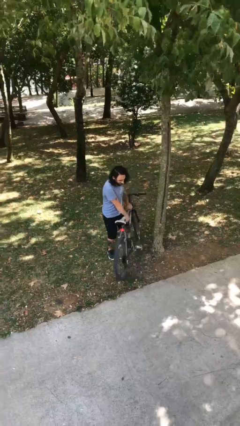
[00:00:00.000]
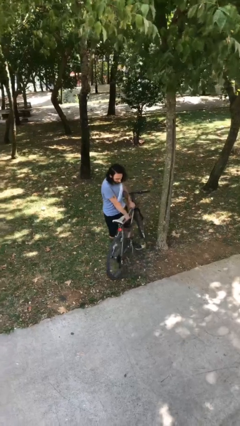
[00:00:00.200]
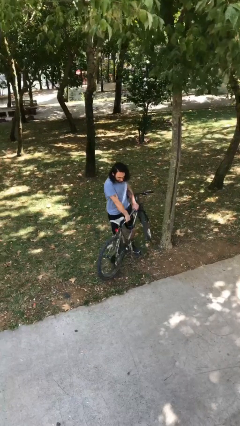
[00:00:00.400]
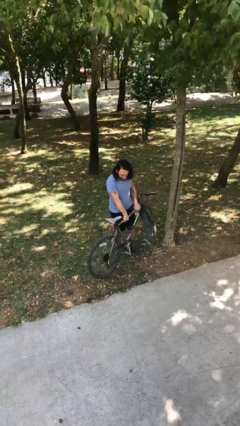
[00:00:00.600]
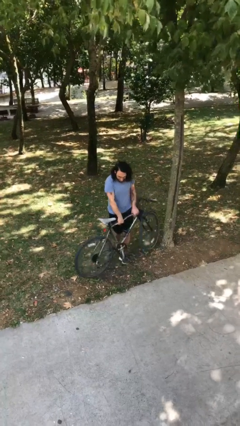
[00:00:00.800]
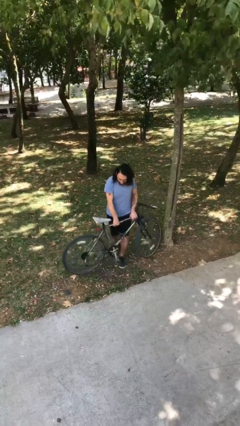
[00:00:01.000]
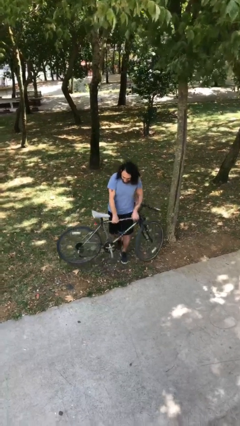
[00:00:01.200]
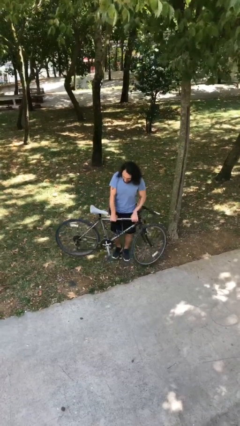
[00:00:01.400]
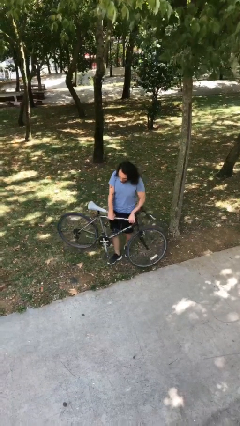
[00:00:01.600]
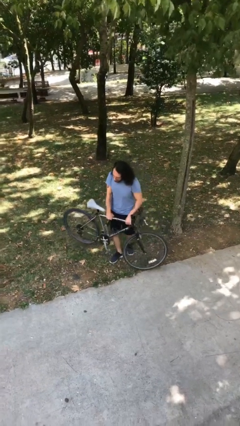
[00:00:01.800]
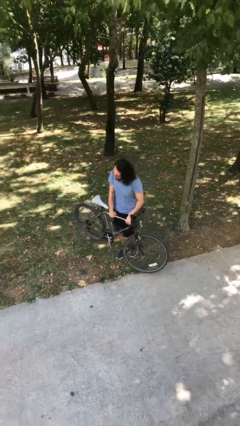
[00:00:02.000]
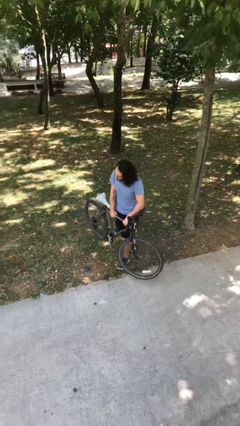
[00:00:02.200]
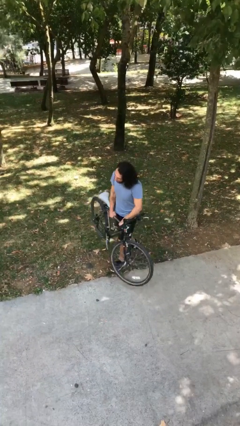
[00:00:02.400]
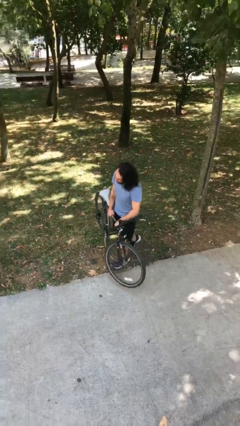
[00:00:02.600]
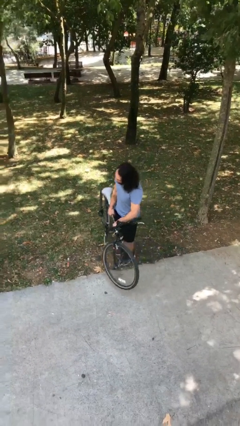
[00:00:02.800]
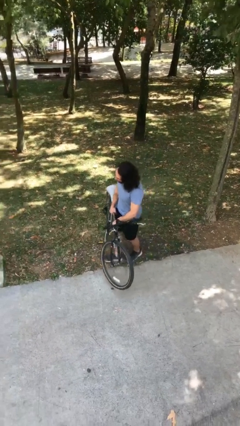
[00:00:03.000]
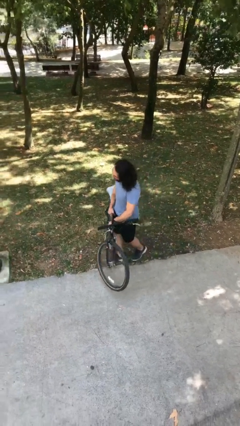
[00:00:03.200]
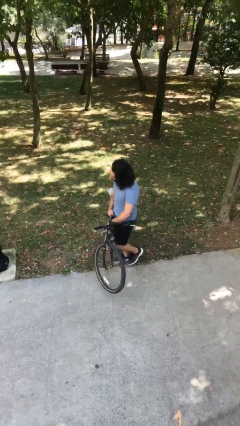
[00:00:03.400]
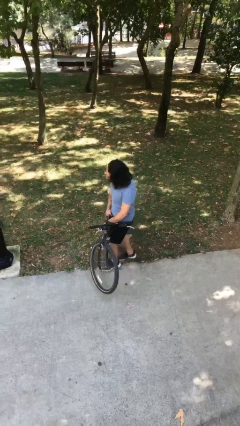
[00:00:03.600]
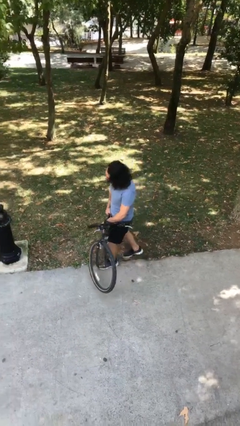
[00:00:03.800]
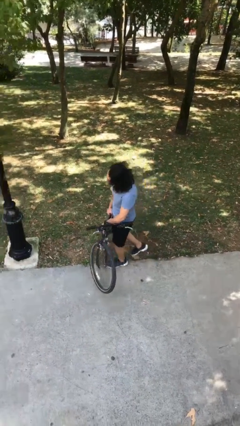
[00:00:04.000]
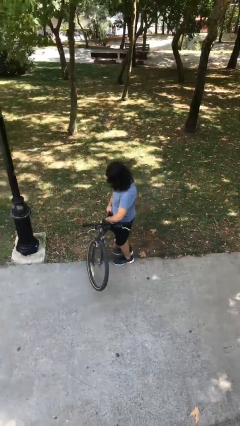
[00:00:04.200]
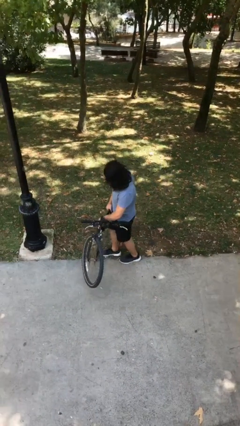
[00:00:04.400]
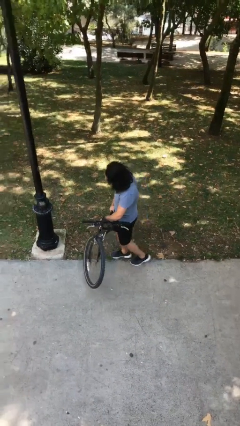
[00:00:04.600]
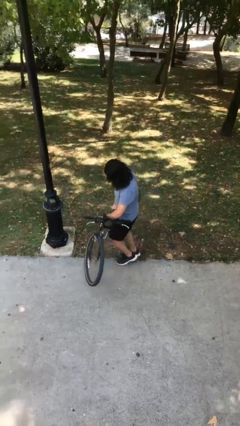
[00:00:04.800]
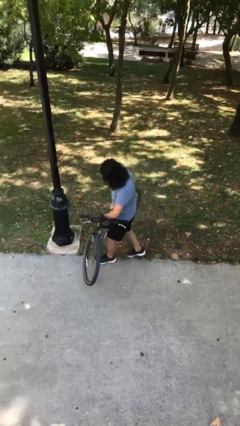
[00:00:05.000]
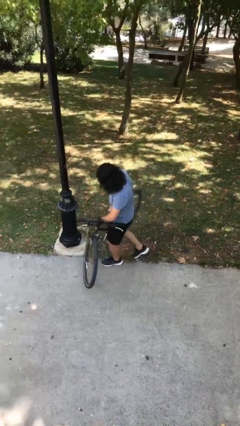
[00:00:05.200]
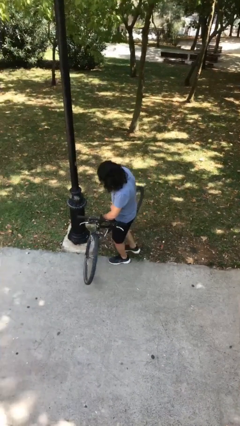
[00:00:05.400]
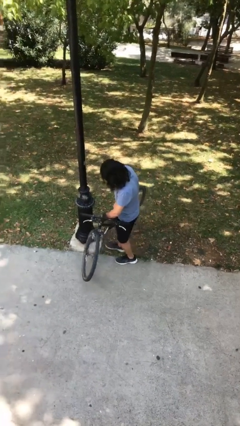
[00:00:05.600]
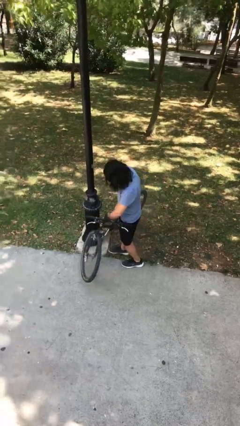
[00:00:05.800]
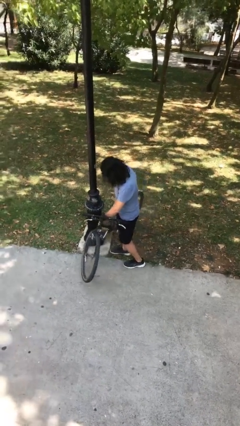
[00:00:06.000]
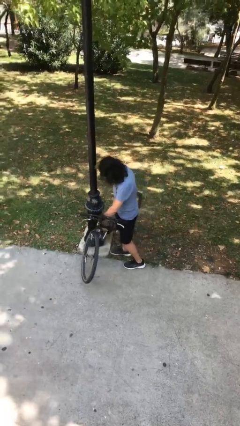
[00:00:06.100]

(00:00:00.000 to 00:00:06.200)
person carries heavy object

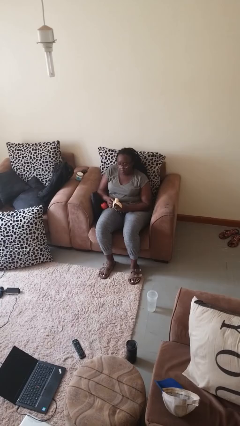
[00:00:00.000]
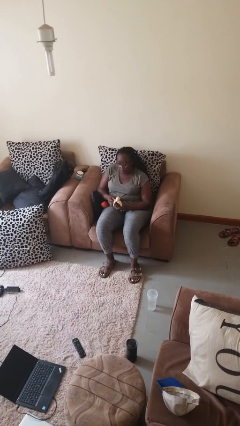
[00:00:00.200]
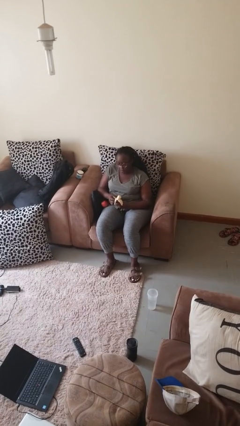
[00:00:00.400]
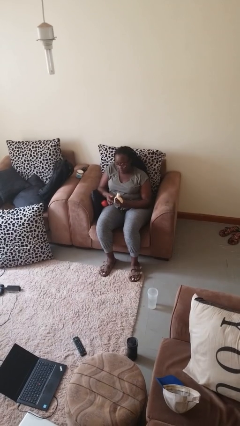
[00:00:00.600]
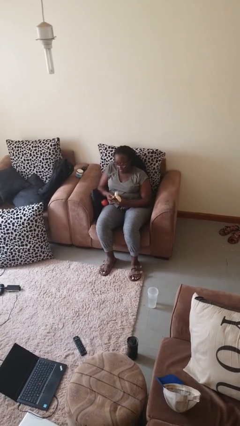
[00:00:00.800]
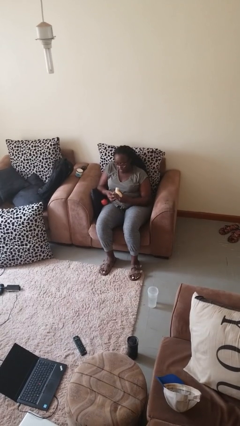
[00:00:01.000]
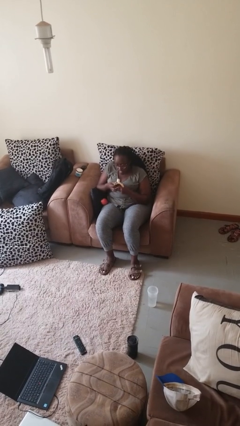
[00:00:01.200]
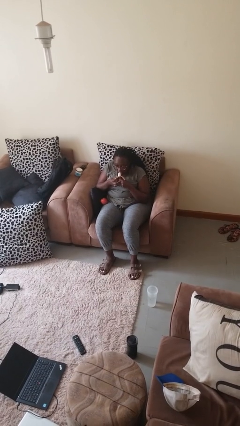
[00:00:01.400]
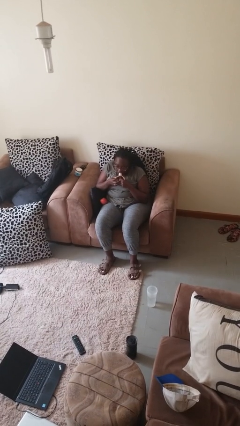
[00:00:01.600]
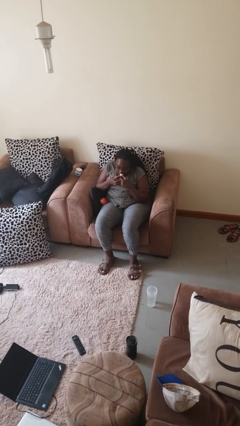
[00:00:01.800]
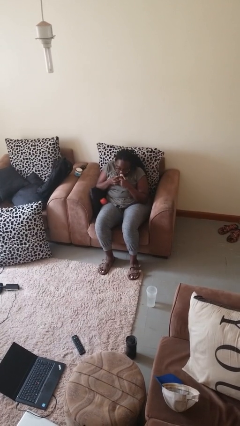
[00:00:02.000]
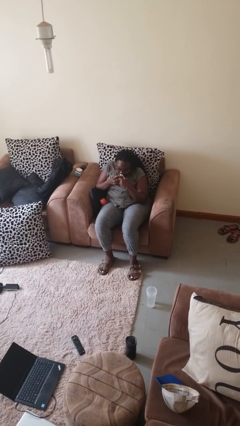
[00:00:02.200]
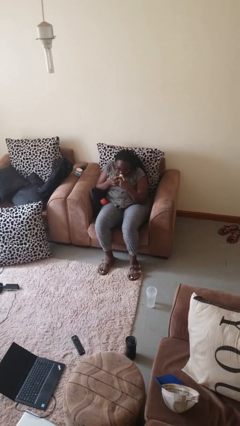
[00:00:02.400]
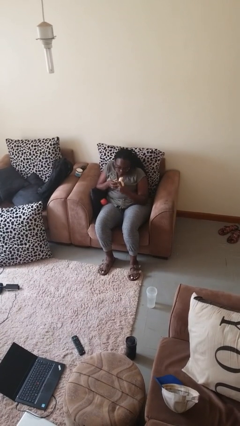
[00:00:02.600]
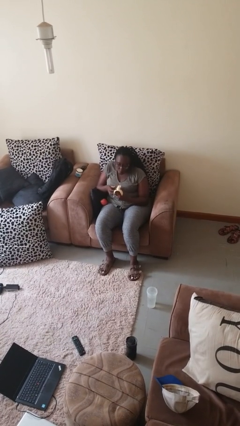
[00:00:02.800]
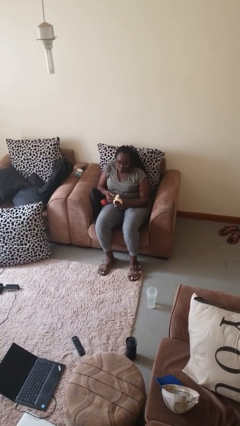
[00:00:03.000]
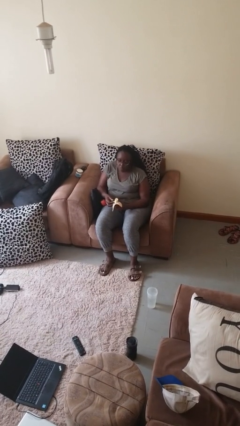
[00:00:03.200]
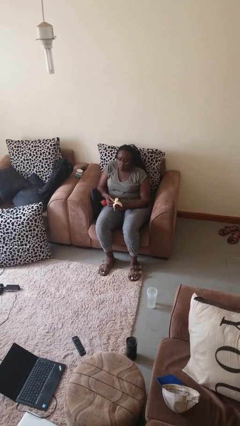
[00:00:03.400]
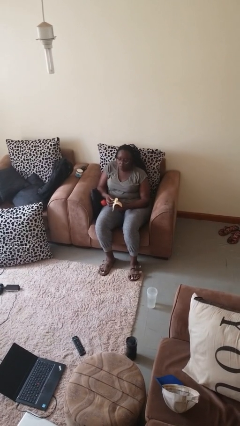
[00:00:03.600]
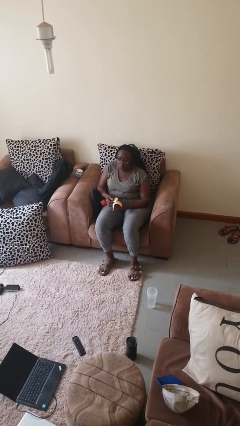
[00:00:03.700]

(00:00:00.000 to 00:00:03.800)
person eats banana

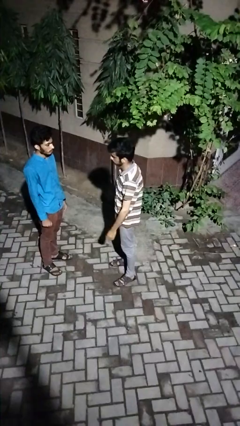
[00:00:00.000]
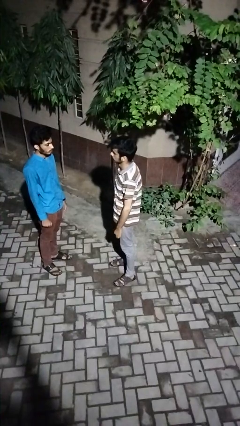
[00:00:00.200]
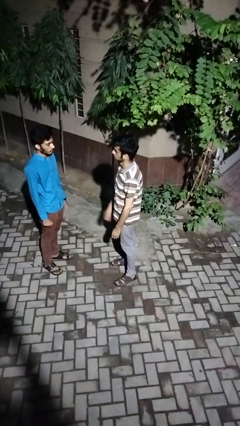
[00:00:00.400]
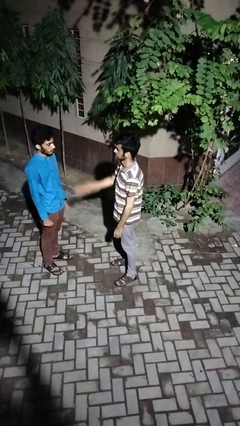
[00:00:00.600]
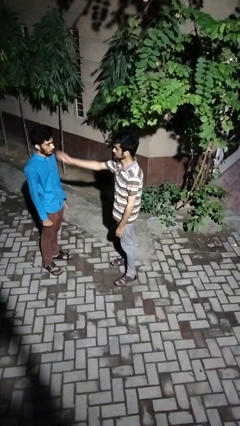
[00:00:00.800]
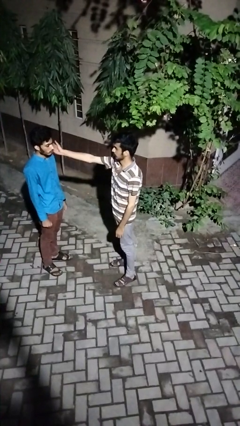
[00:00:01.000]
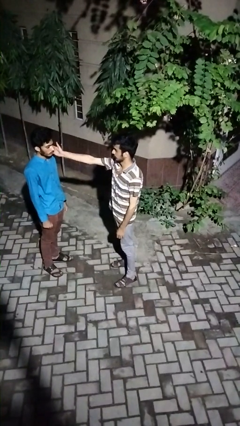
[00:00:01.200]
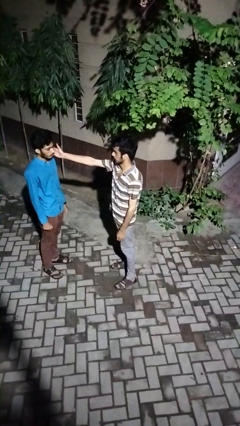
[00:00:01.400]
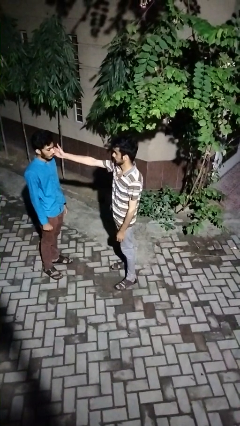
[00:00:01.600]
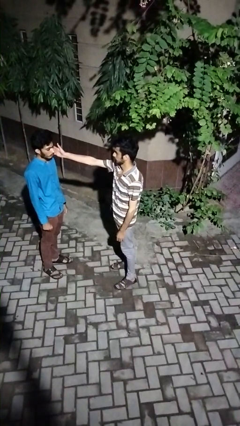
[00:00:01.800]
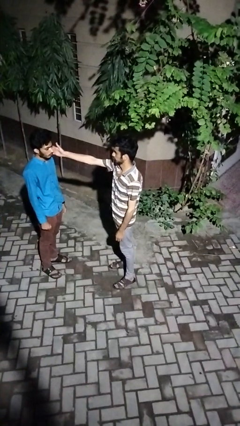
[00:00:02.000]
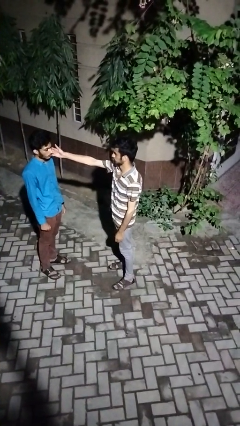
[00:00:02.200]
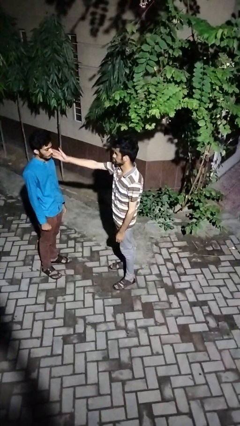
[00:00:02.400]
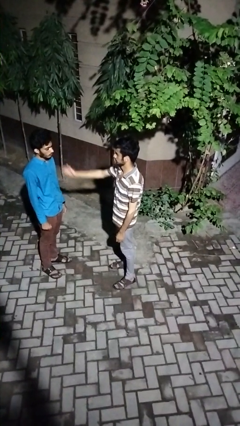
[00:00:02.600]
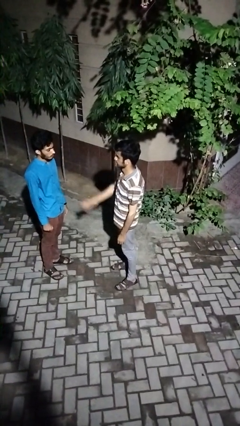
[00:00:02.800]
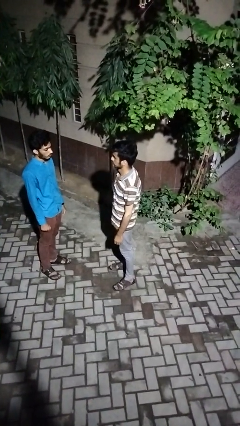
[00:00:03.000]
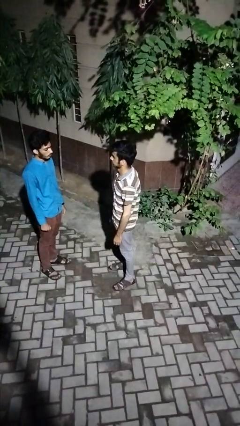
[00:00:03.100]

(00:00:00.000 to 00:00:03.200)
person touches face of person

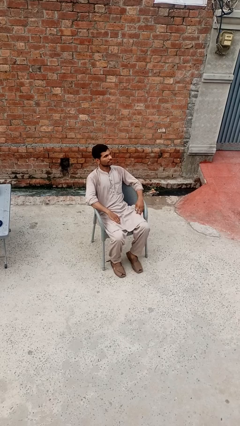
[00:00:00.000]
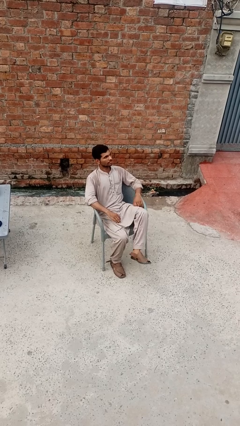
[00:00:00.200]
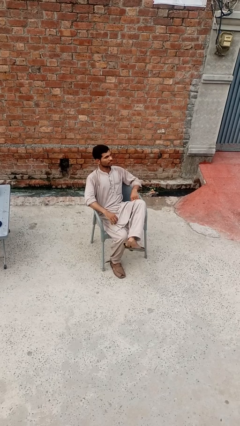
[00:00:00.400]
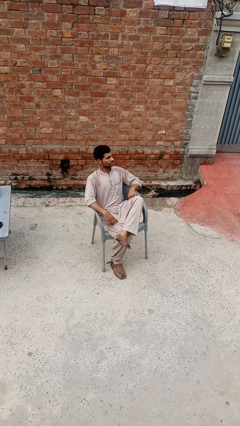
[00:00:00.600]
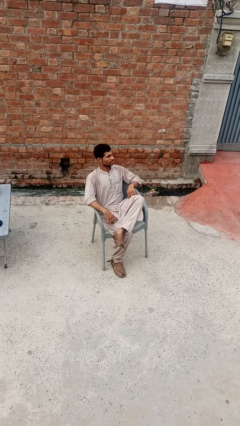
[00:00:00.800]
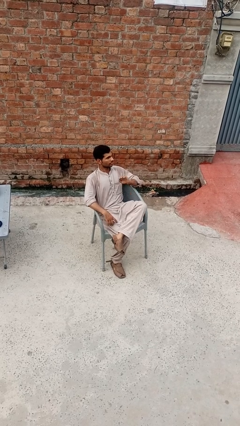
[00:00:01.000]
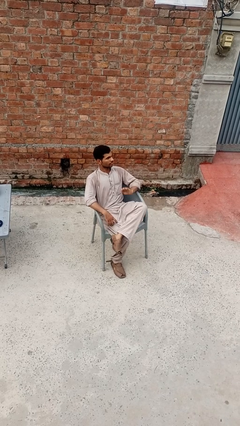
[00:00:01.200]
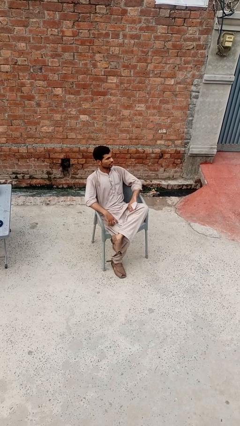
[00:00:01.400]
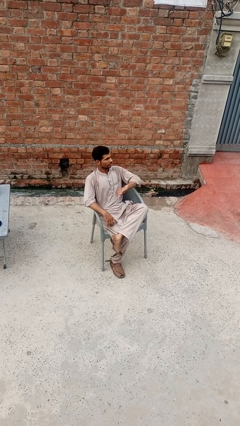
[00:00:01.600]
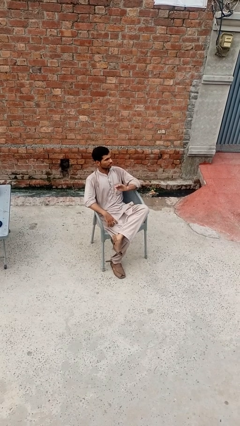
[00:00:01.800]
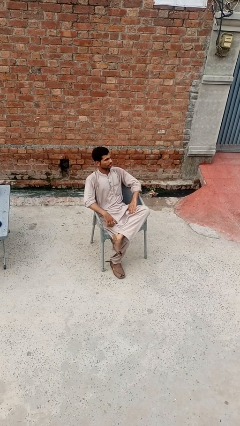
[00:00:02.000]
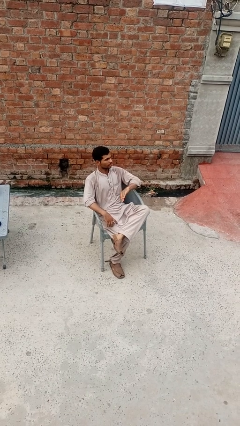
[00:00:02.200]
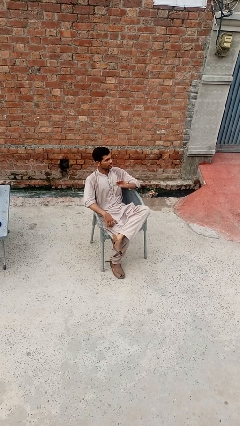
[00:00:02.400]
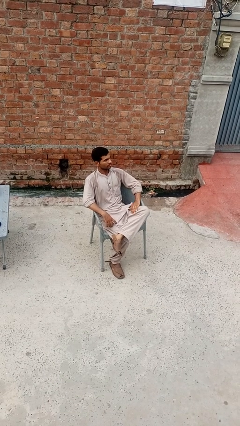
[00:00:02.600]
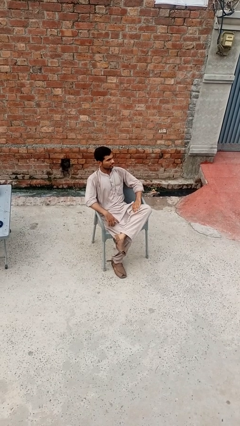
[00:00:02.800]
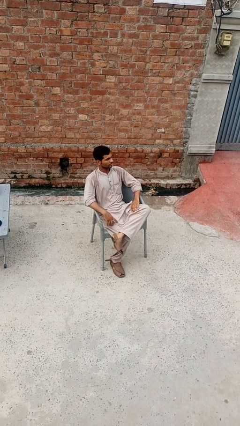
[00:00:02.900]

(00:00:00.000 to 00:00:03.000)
person slaps hands on thighs

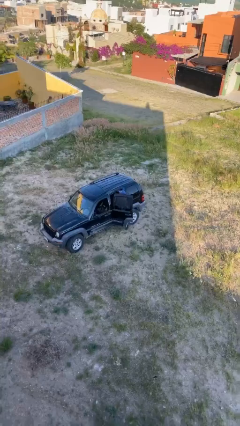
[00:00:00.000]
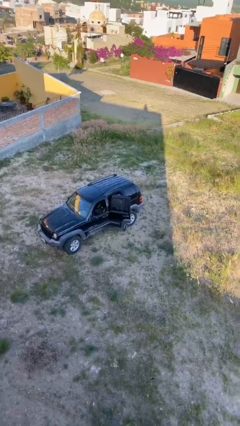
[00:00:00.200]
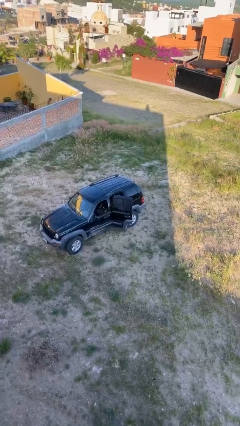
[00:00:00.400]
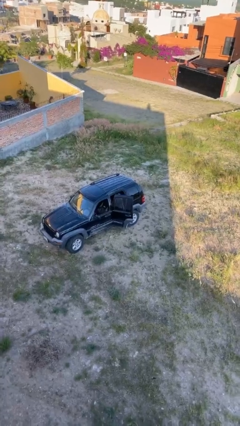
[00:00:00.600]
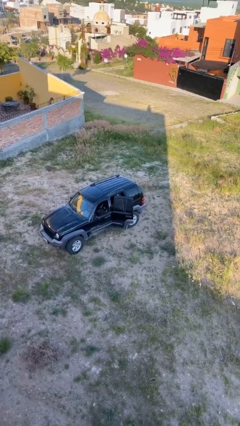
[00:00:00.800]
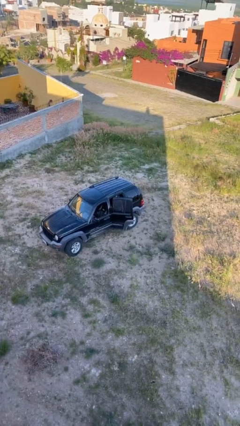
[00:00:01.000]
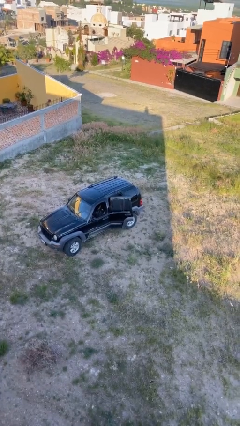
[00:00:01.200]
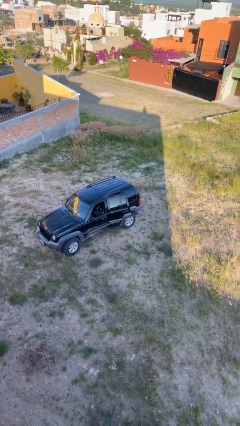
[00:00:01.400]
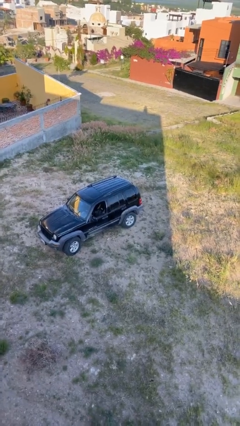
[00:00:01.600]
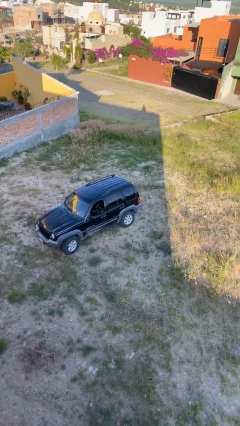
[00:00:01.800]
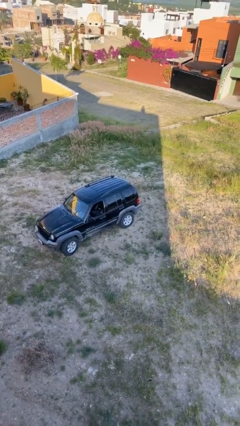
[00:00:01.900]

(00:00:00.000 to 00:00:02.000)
person enters car
